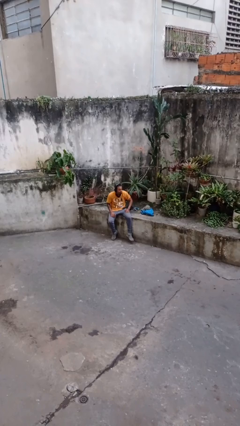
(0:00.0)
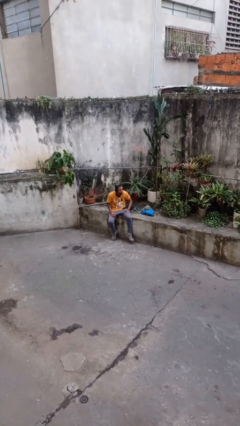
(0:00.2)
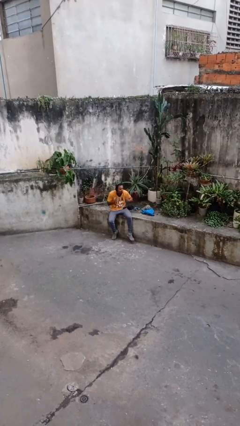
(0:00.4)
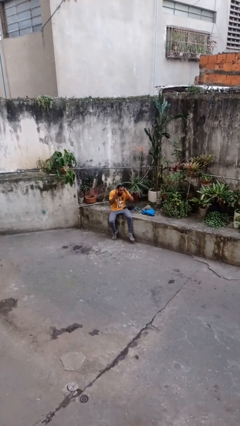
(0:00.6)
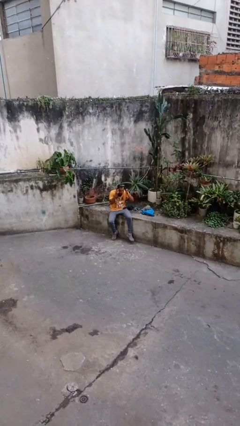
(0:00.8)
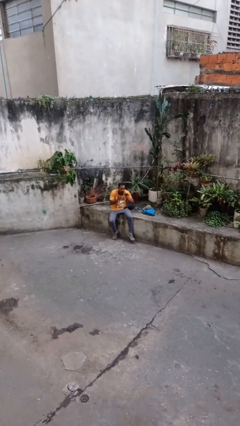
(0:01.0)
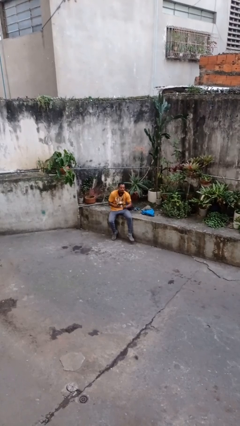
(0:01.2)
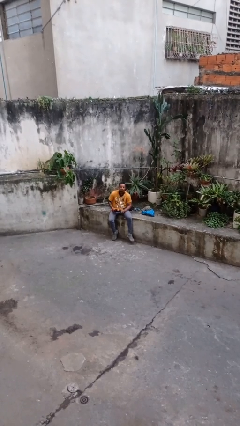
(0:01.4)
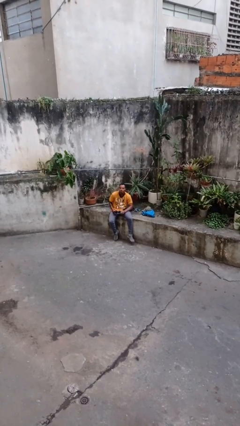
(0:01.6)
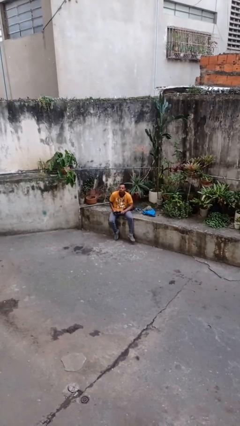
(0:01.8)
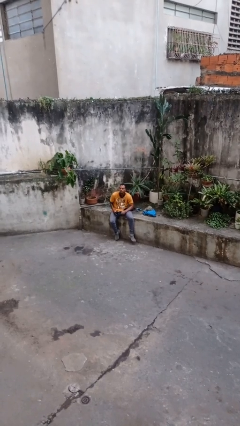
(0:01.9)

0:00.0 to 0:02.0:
person takes off headphones

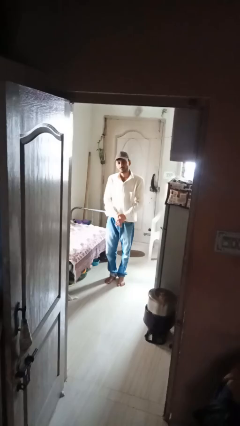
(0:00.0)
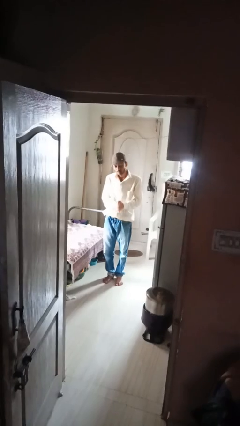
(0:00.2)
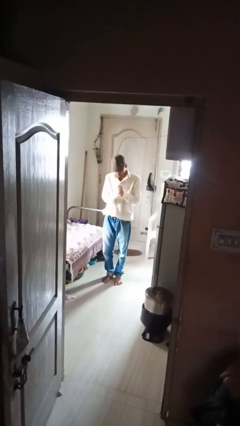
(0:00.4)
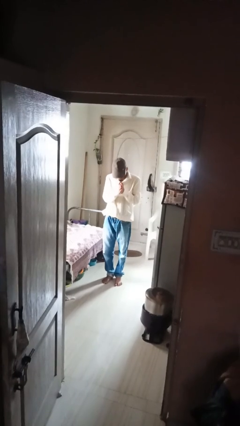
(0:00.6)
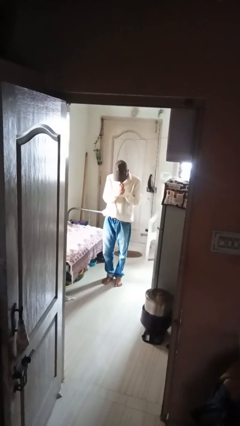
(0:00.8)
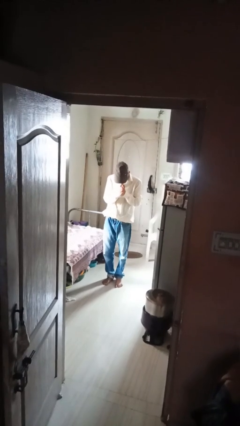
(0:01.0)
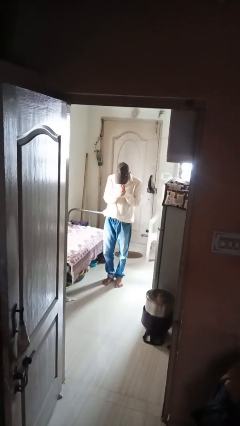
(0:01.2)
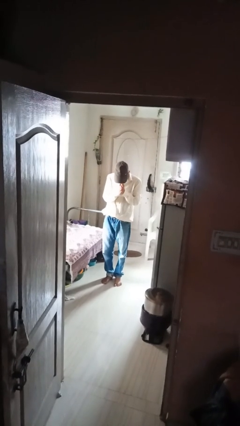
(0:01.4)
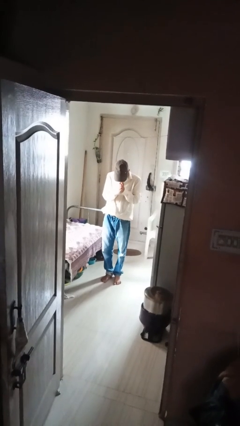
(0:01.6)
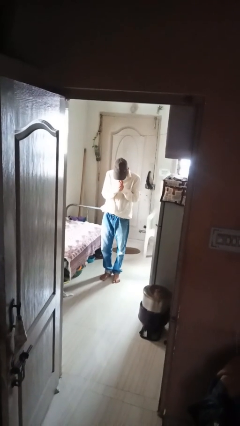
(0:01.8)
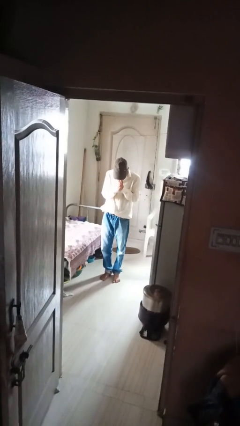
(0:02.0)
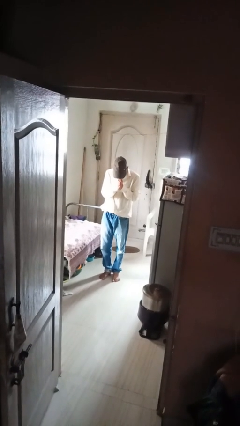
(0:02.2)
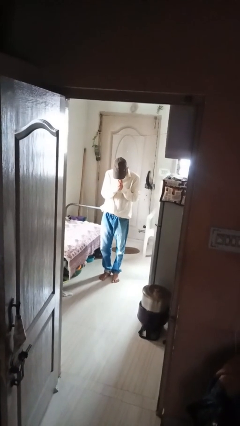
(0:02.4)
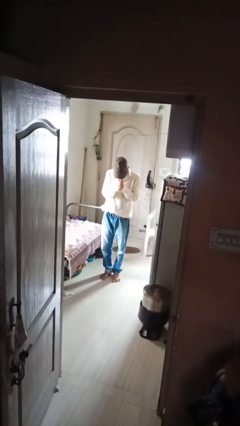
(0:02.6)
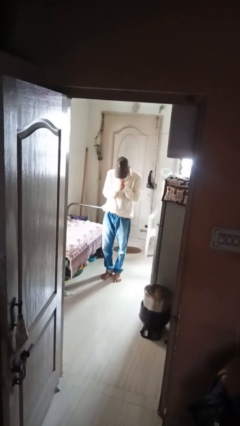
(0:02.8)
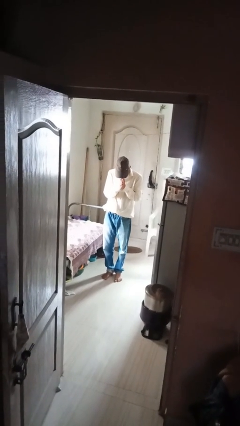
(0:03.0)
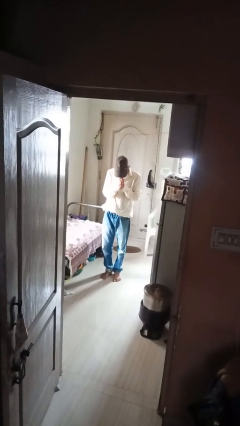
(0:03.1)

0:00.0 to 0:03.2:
person prays

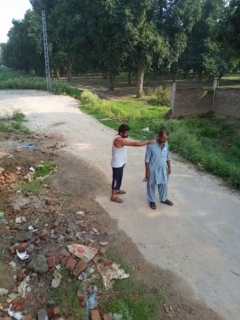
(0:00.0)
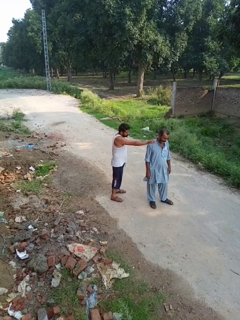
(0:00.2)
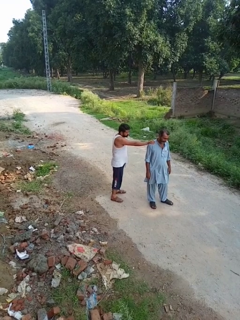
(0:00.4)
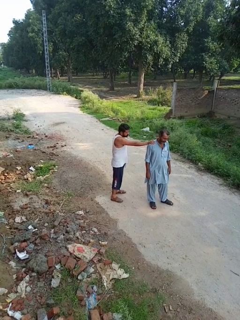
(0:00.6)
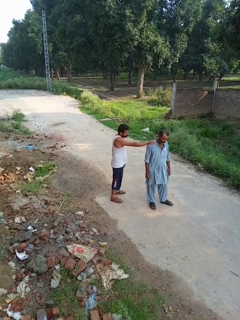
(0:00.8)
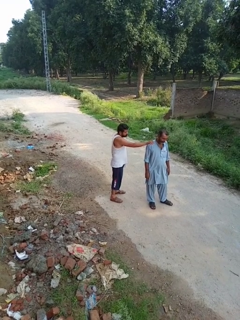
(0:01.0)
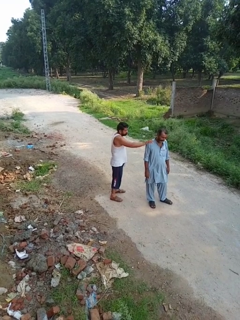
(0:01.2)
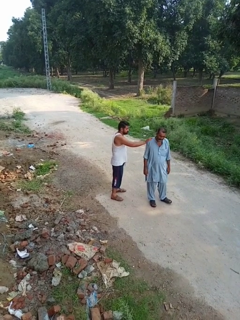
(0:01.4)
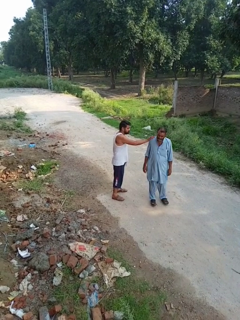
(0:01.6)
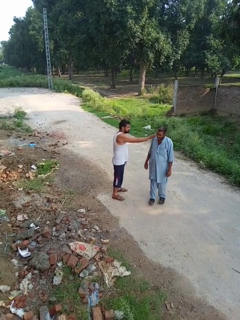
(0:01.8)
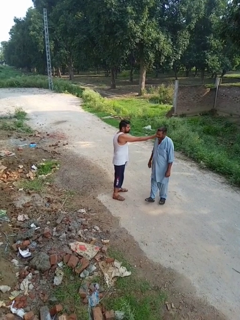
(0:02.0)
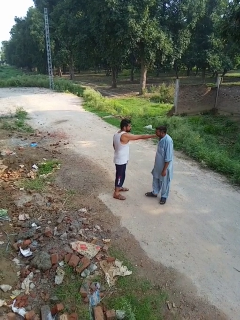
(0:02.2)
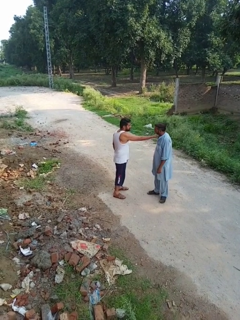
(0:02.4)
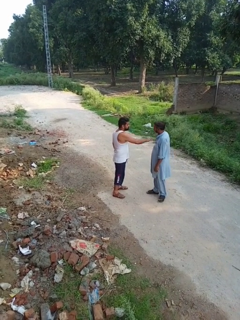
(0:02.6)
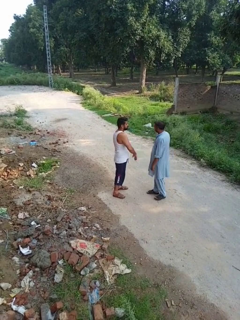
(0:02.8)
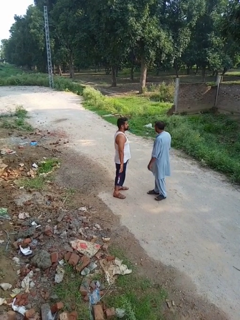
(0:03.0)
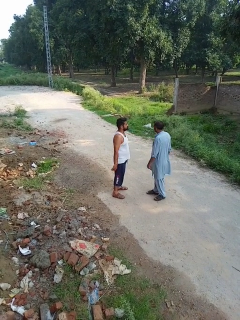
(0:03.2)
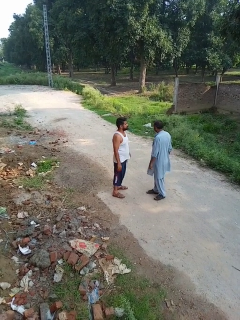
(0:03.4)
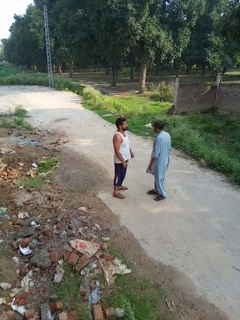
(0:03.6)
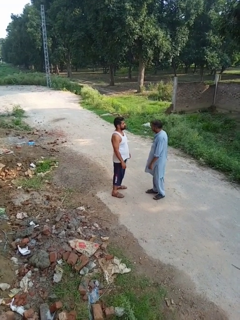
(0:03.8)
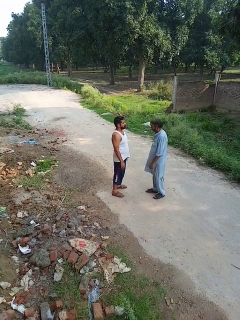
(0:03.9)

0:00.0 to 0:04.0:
person spins person around

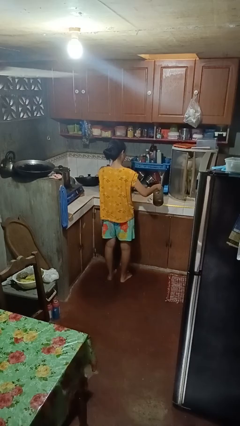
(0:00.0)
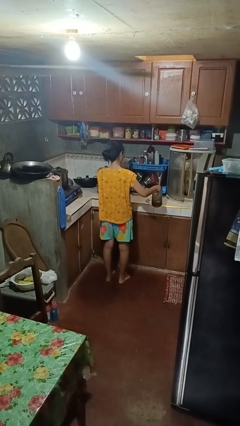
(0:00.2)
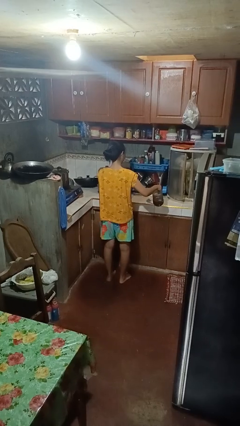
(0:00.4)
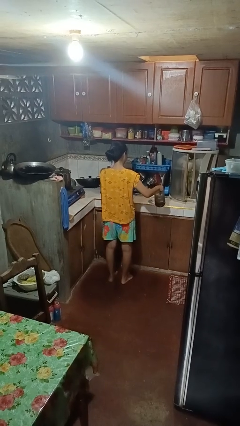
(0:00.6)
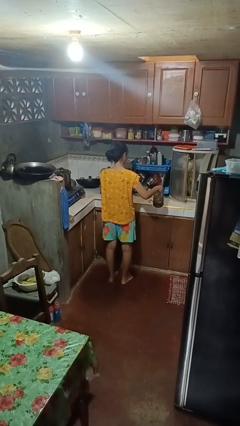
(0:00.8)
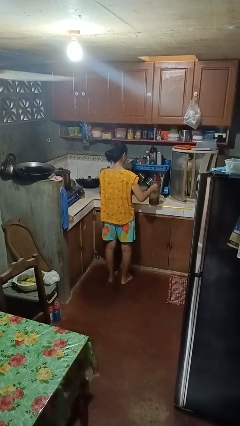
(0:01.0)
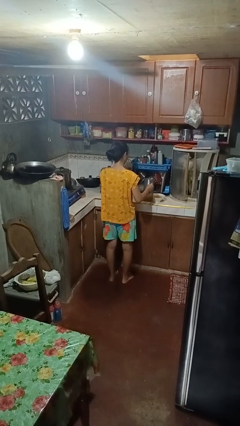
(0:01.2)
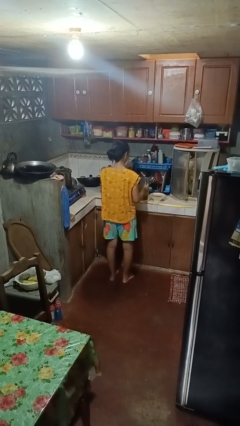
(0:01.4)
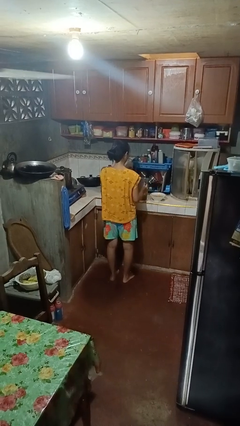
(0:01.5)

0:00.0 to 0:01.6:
person pours into bowl

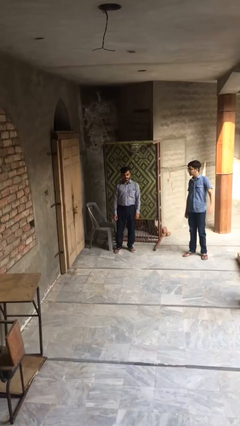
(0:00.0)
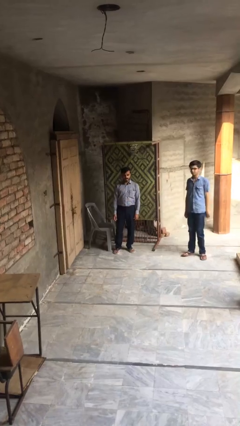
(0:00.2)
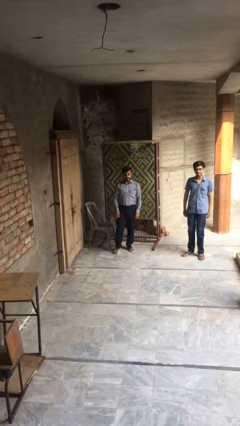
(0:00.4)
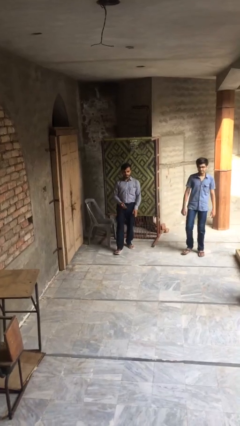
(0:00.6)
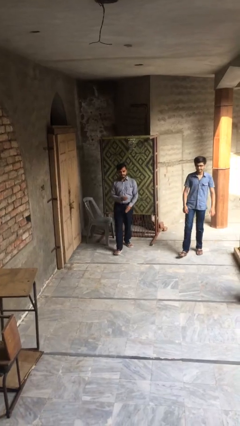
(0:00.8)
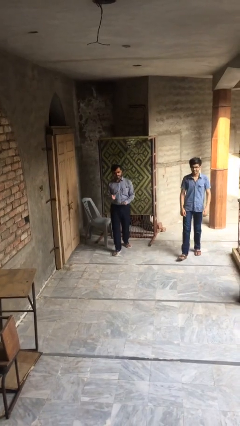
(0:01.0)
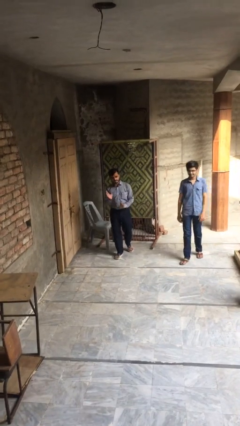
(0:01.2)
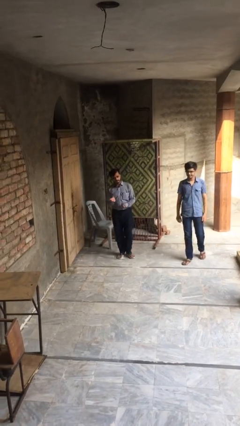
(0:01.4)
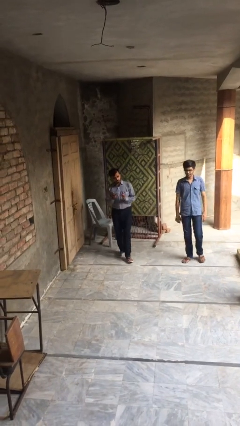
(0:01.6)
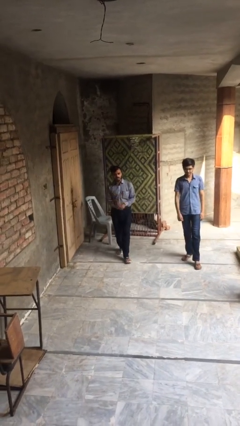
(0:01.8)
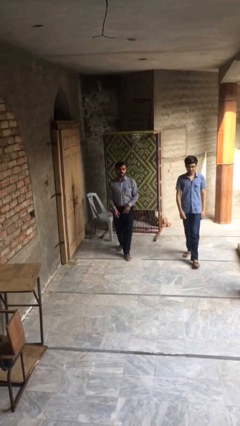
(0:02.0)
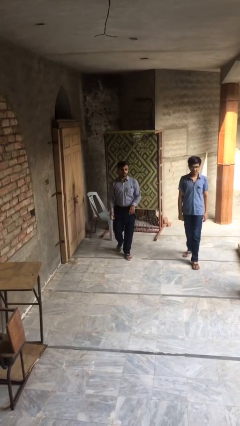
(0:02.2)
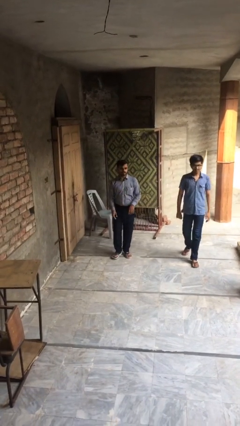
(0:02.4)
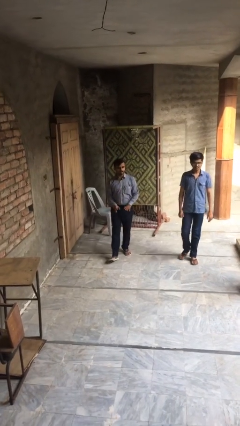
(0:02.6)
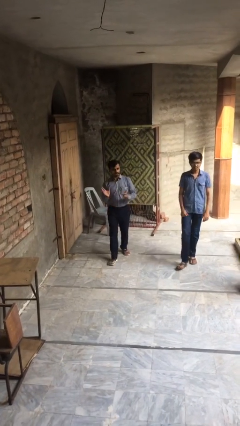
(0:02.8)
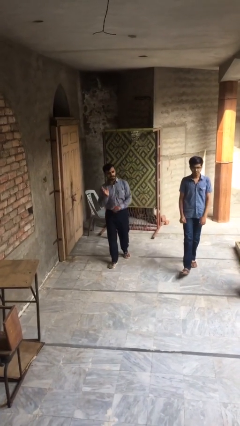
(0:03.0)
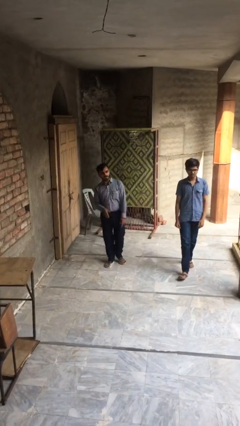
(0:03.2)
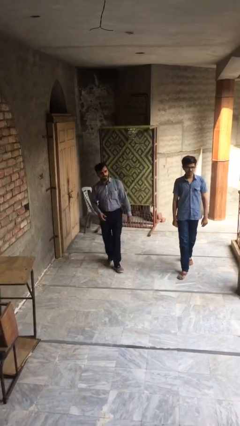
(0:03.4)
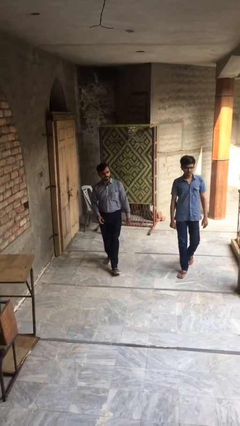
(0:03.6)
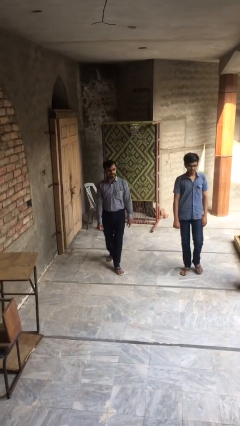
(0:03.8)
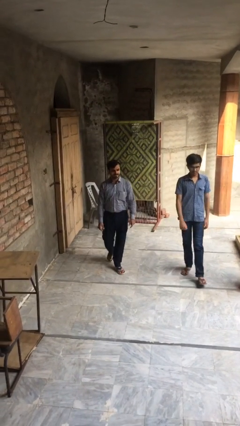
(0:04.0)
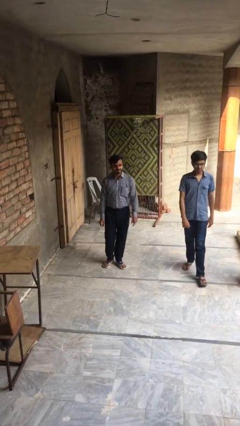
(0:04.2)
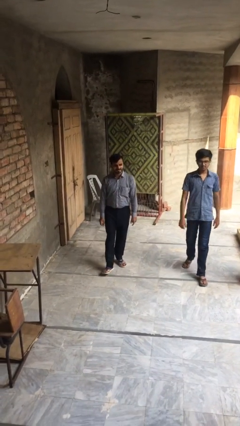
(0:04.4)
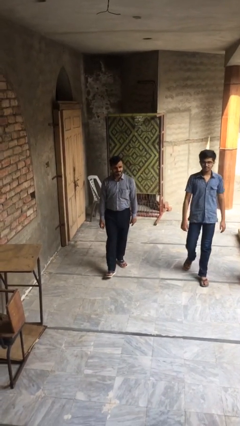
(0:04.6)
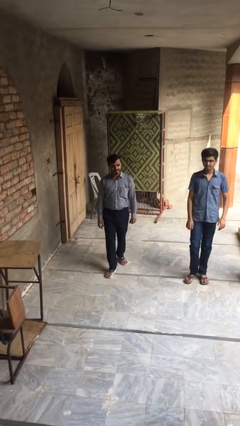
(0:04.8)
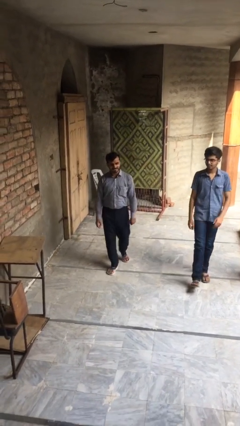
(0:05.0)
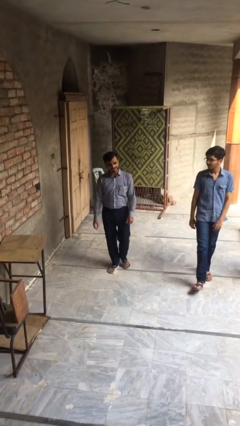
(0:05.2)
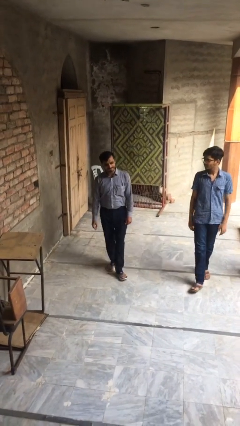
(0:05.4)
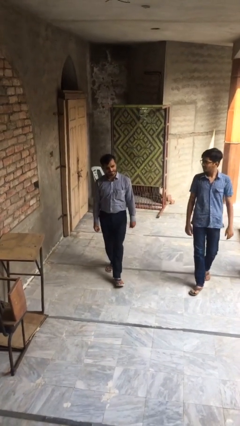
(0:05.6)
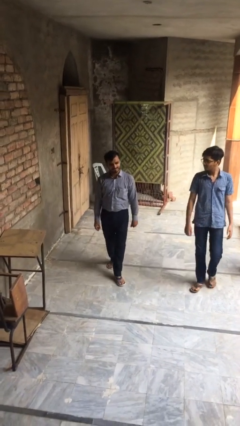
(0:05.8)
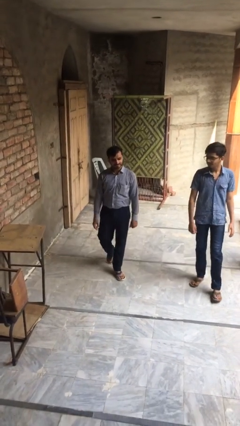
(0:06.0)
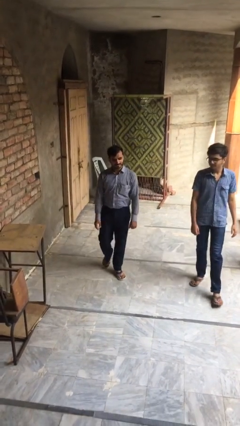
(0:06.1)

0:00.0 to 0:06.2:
person talks to person

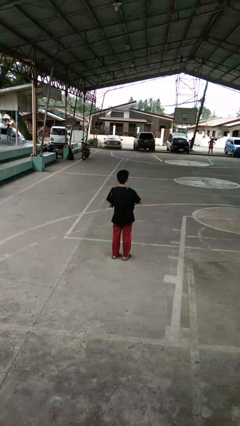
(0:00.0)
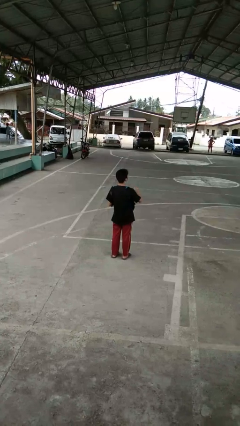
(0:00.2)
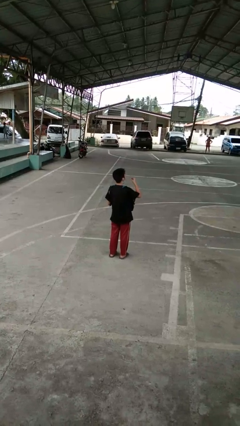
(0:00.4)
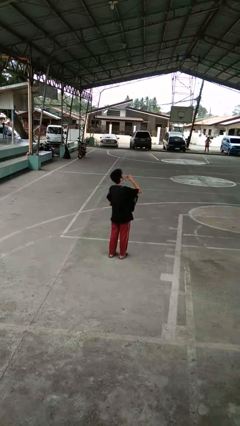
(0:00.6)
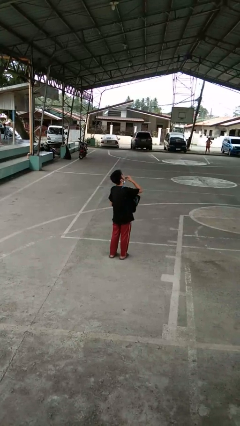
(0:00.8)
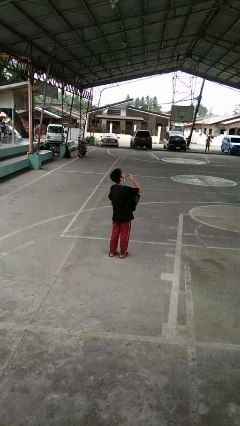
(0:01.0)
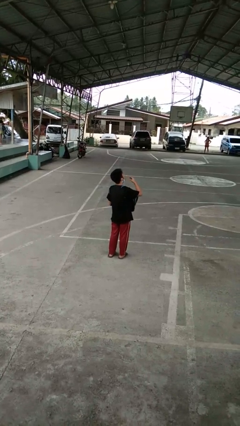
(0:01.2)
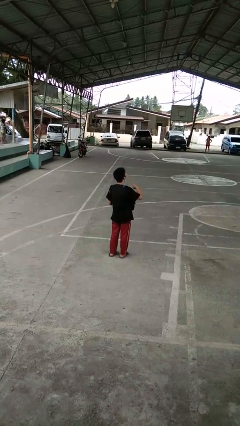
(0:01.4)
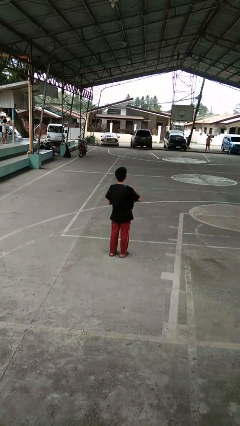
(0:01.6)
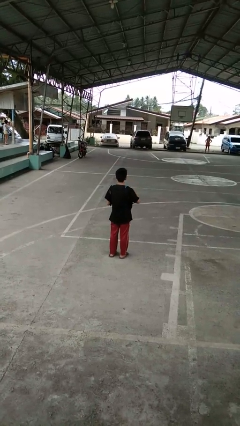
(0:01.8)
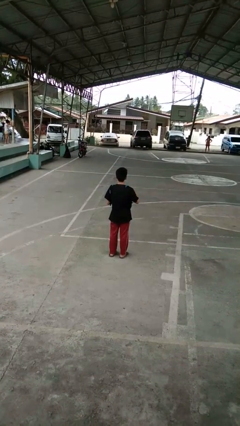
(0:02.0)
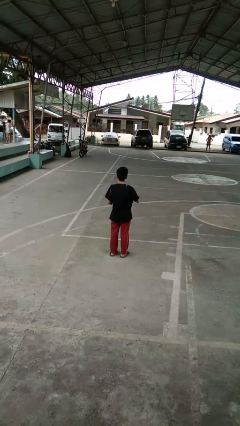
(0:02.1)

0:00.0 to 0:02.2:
person eats snack from bag
